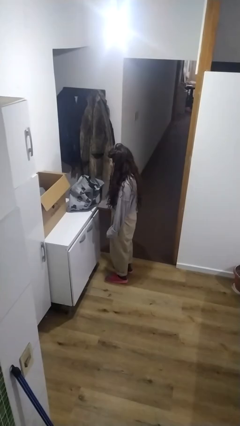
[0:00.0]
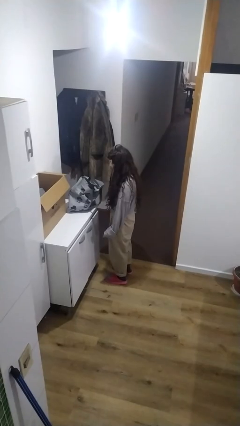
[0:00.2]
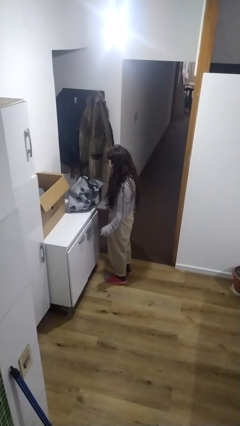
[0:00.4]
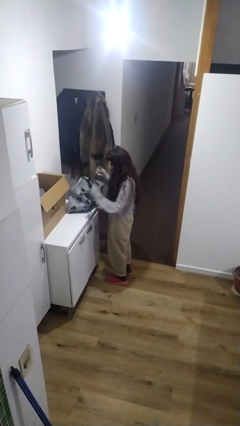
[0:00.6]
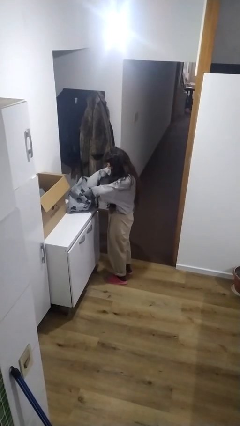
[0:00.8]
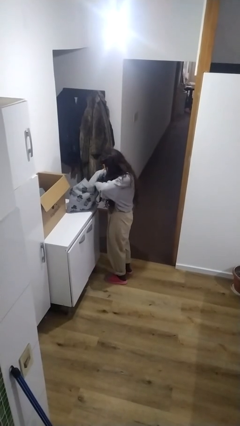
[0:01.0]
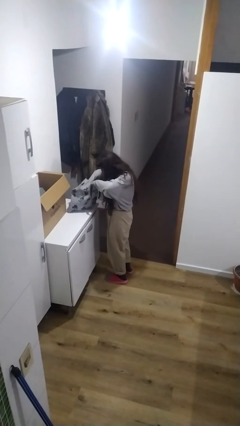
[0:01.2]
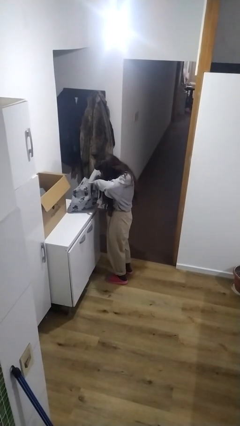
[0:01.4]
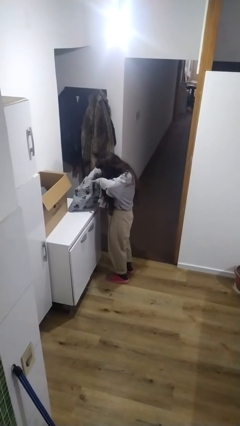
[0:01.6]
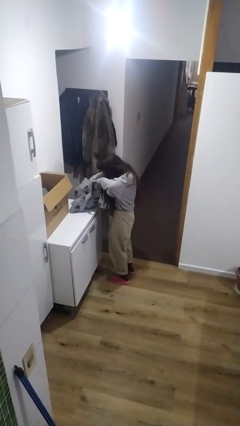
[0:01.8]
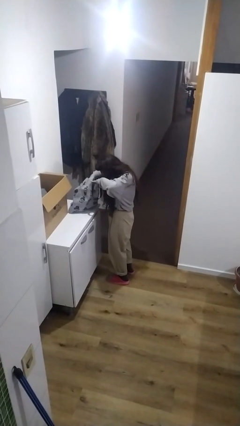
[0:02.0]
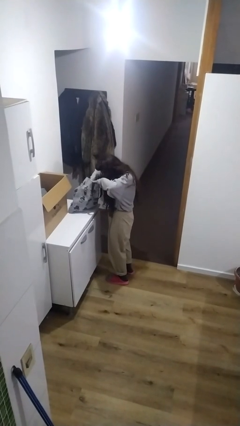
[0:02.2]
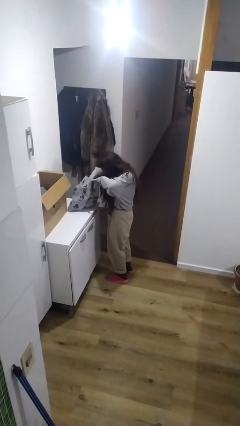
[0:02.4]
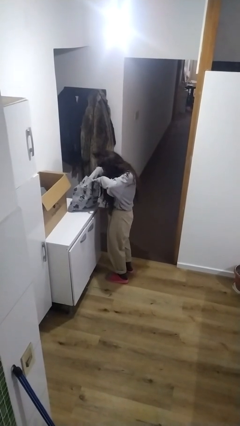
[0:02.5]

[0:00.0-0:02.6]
person searches in bag

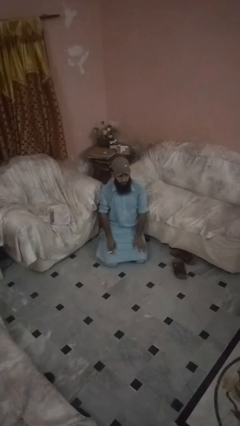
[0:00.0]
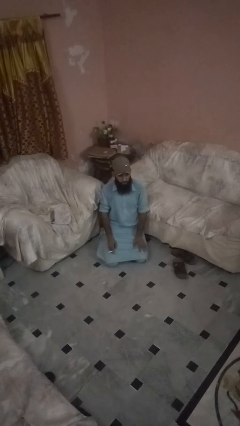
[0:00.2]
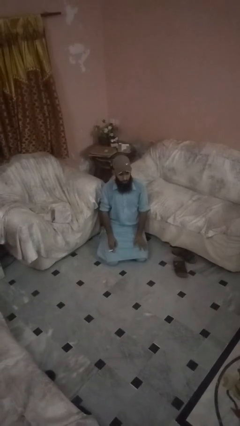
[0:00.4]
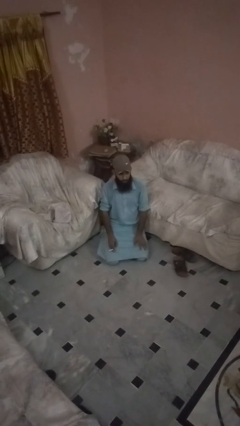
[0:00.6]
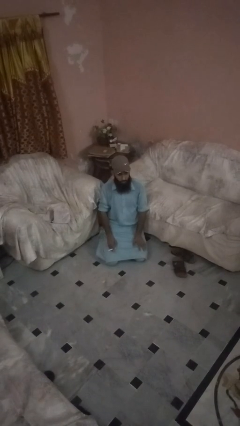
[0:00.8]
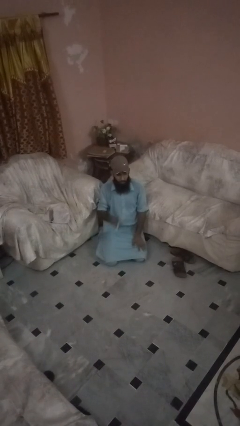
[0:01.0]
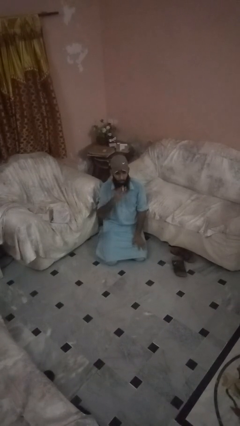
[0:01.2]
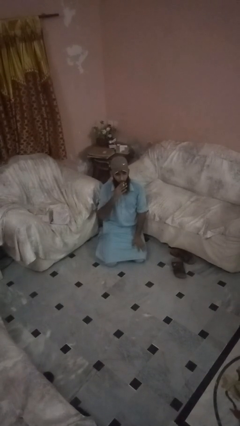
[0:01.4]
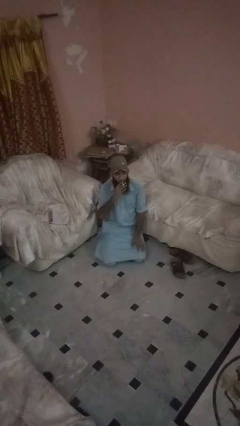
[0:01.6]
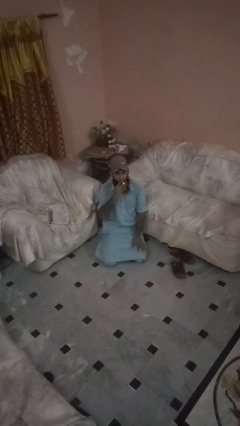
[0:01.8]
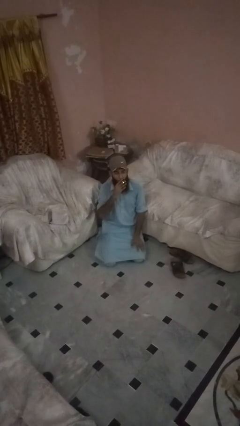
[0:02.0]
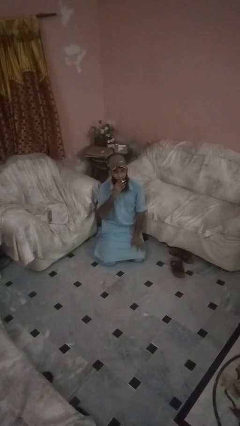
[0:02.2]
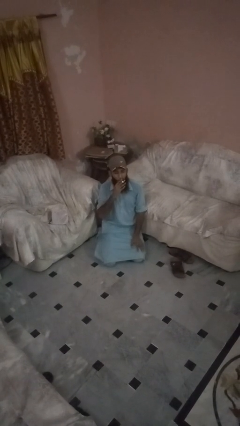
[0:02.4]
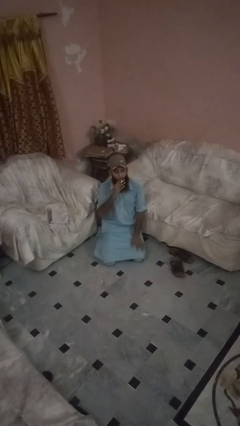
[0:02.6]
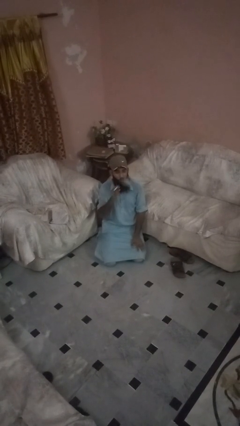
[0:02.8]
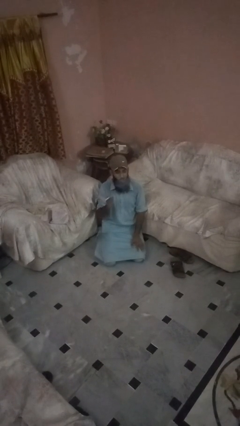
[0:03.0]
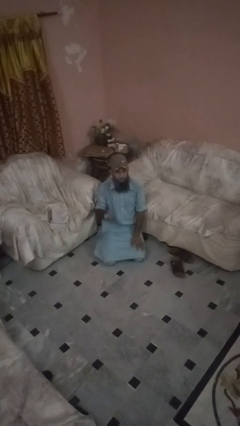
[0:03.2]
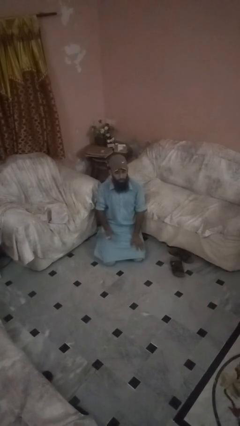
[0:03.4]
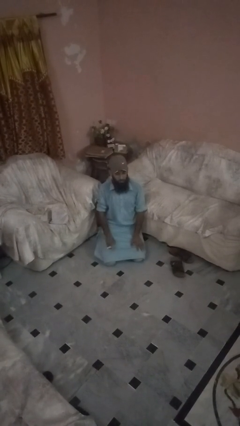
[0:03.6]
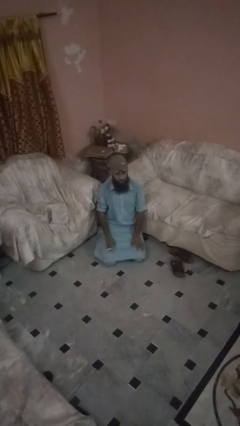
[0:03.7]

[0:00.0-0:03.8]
person vapes

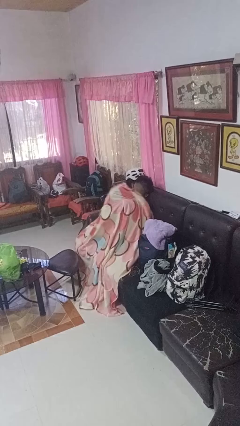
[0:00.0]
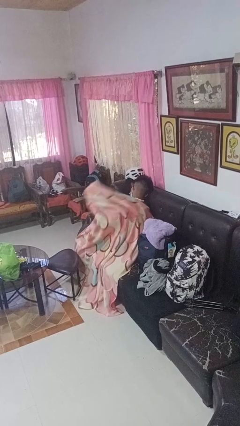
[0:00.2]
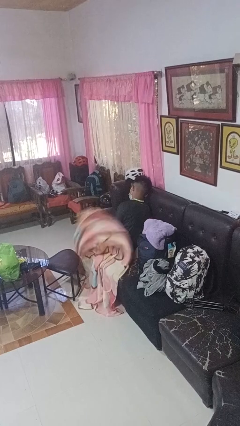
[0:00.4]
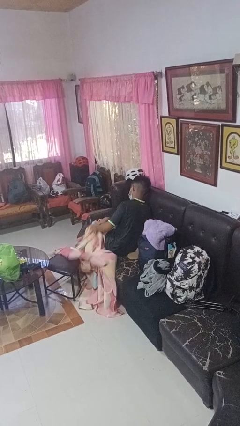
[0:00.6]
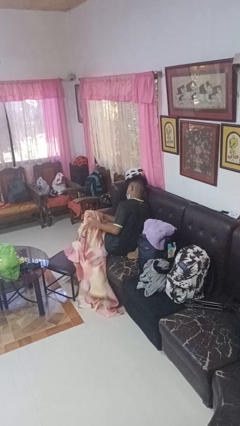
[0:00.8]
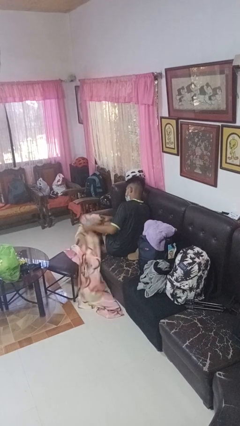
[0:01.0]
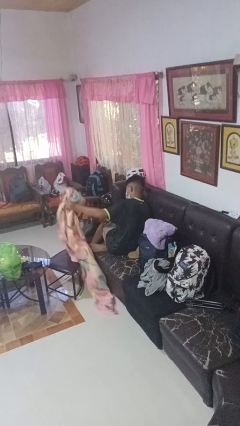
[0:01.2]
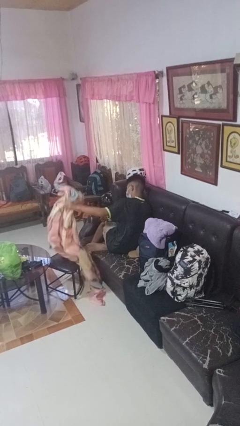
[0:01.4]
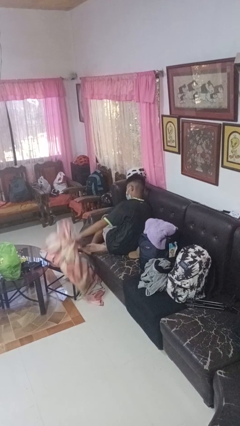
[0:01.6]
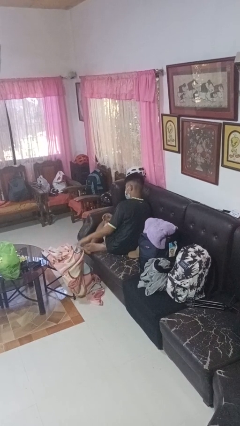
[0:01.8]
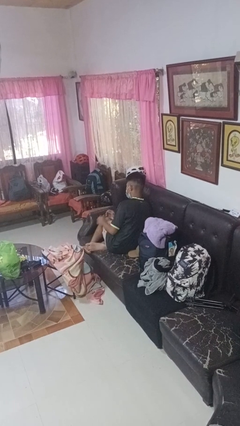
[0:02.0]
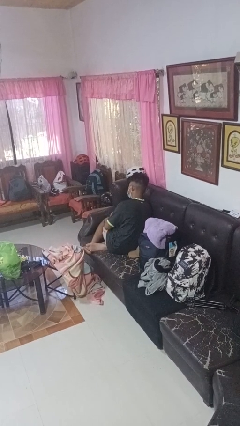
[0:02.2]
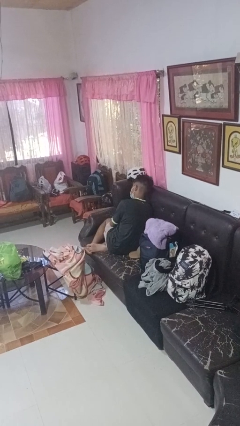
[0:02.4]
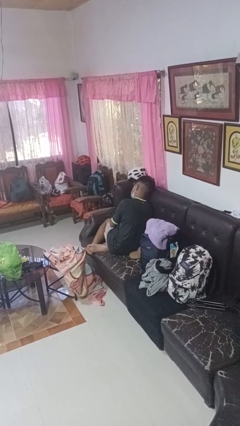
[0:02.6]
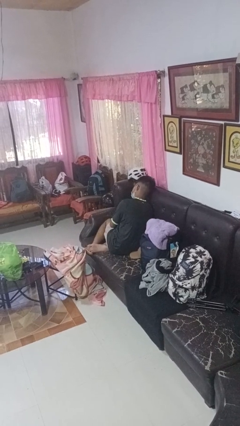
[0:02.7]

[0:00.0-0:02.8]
person uncovers with blanket

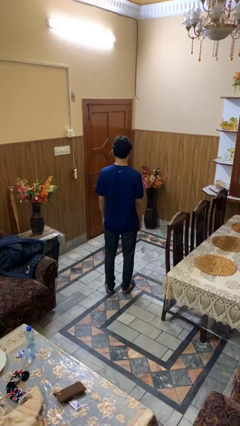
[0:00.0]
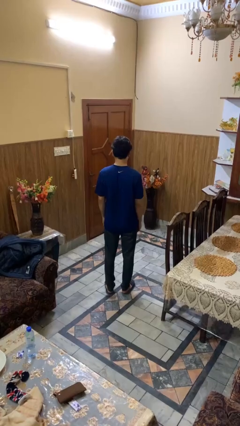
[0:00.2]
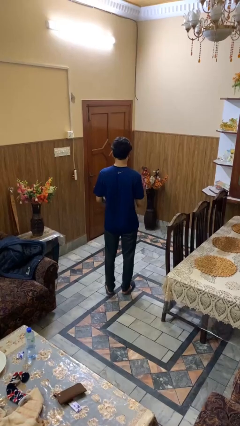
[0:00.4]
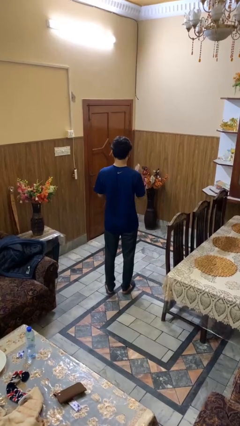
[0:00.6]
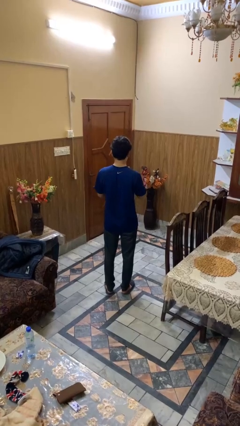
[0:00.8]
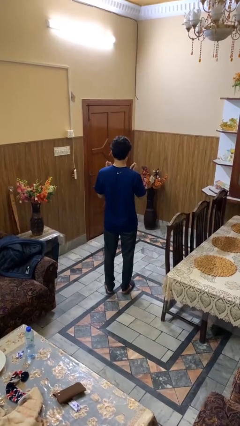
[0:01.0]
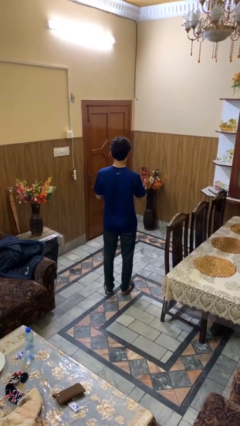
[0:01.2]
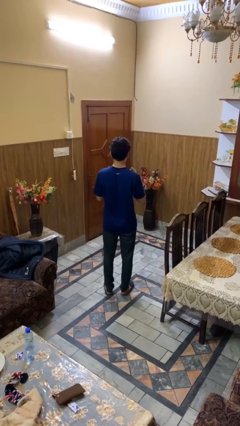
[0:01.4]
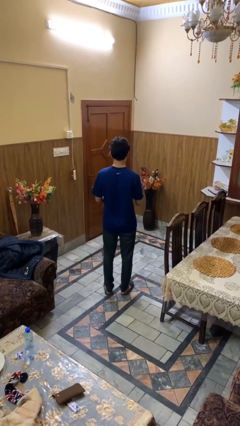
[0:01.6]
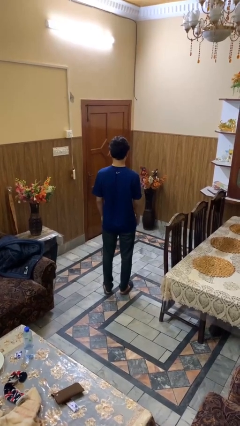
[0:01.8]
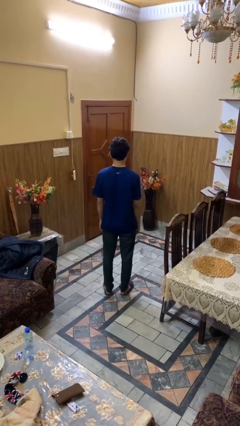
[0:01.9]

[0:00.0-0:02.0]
person drums on chest

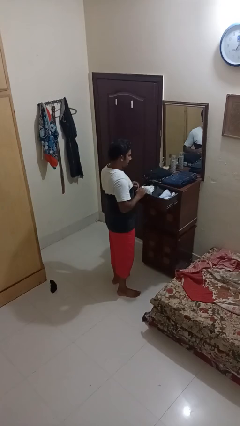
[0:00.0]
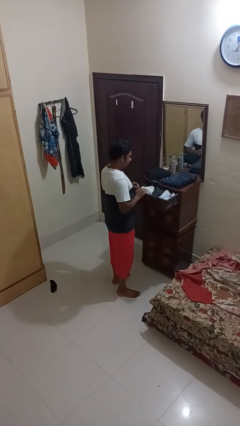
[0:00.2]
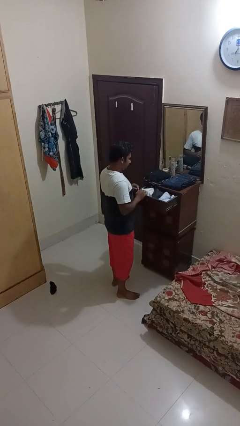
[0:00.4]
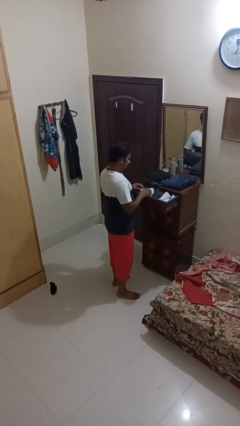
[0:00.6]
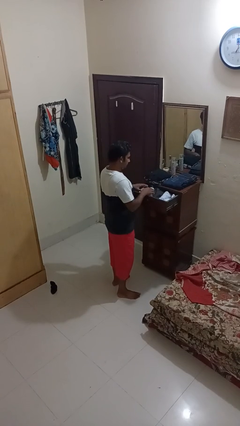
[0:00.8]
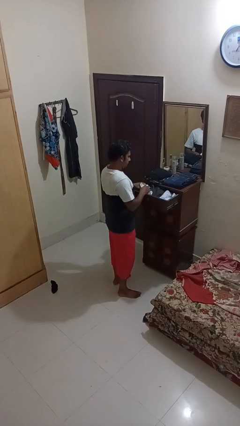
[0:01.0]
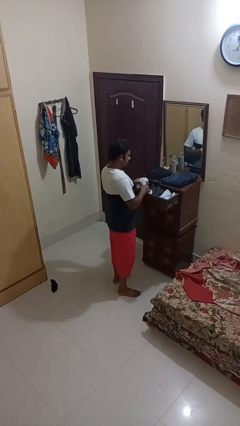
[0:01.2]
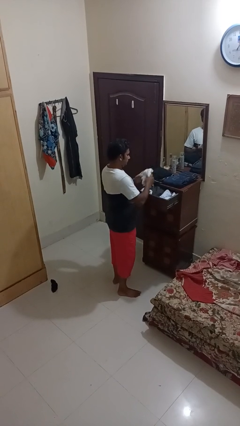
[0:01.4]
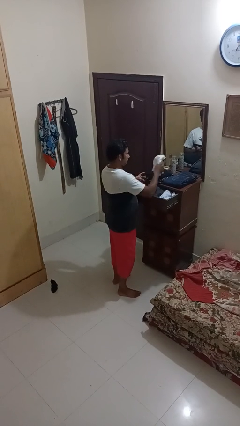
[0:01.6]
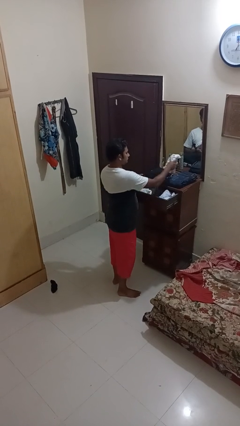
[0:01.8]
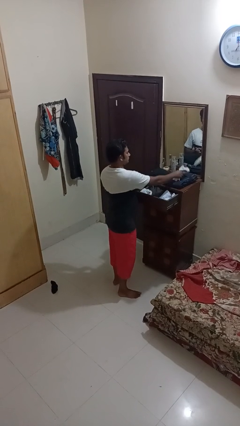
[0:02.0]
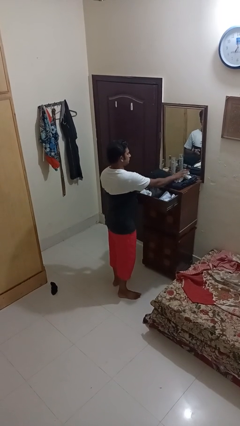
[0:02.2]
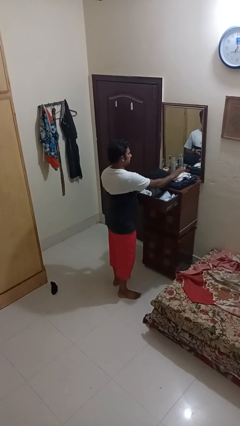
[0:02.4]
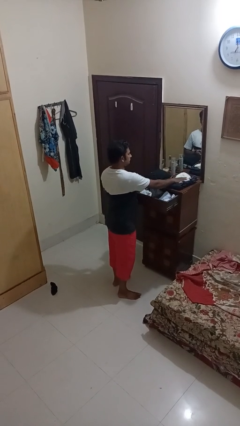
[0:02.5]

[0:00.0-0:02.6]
person takes clothes from dresser

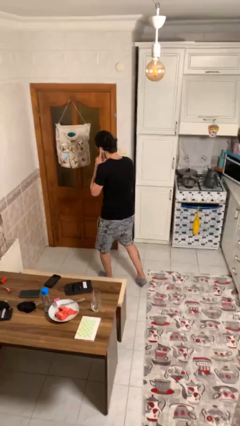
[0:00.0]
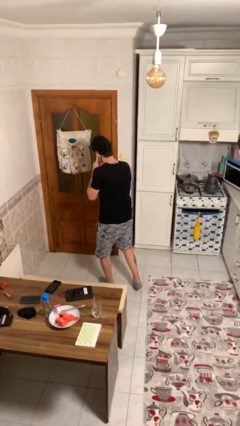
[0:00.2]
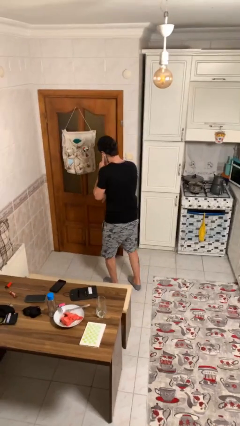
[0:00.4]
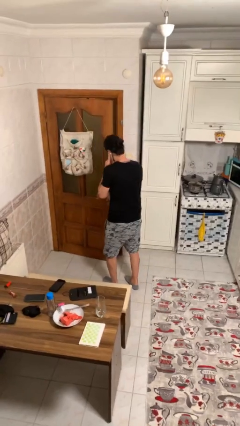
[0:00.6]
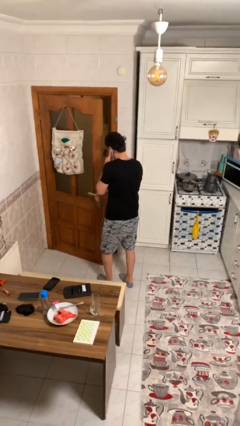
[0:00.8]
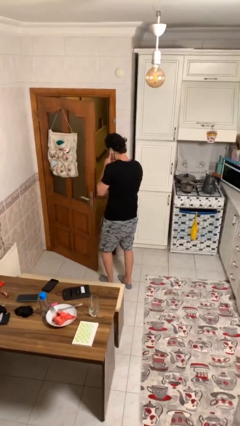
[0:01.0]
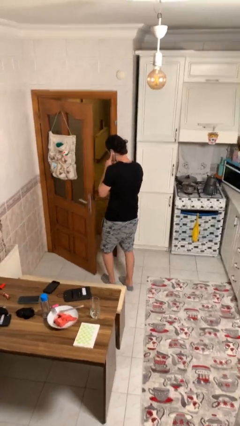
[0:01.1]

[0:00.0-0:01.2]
person opens facility door

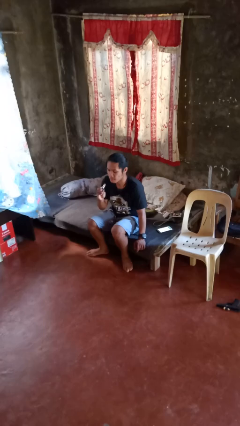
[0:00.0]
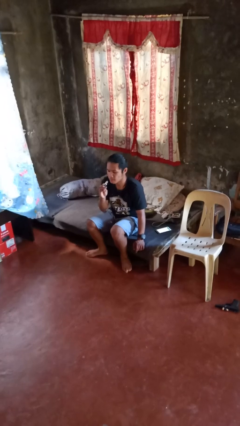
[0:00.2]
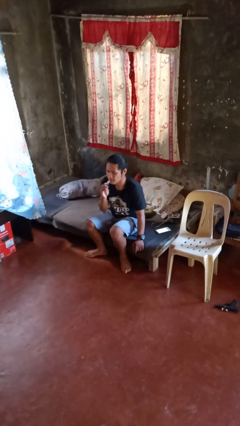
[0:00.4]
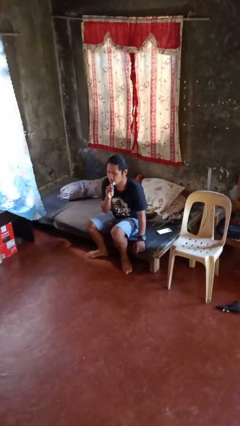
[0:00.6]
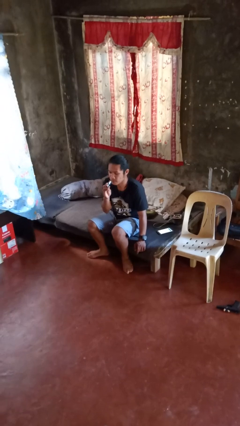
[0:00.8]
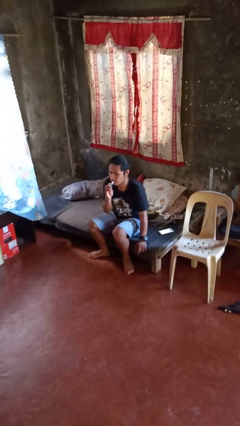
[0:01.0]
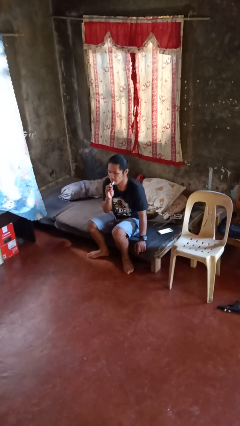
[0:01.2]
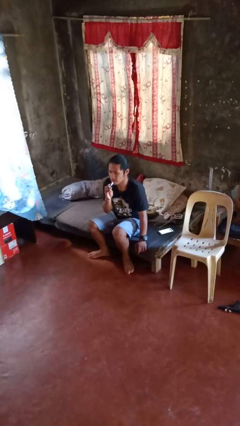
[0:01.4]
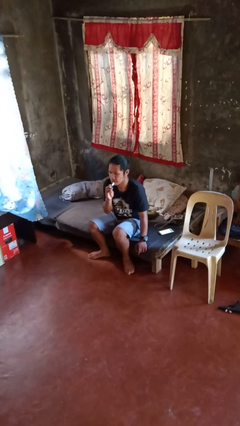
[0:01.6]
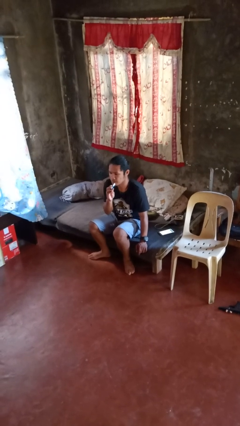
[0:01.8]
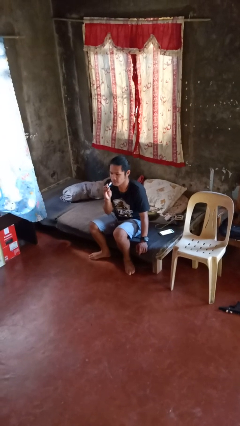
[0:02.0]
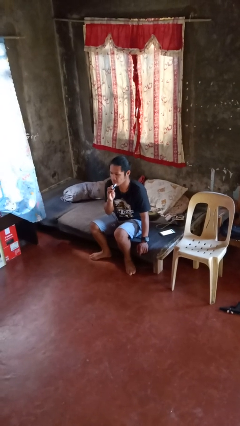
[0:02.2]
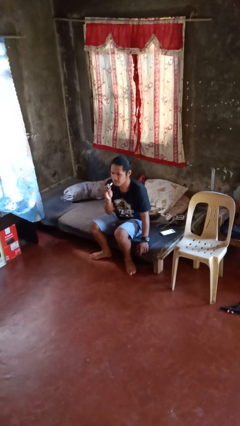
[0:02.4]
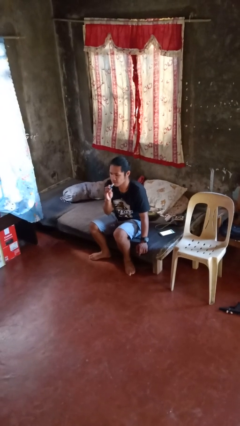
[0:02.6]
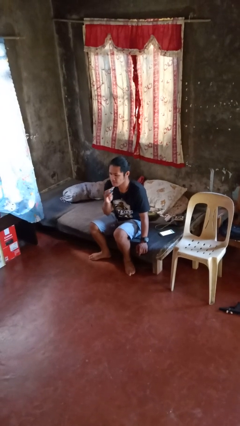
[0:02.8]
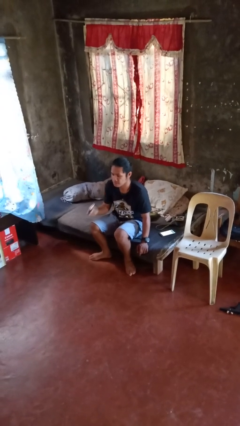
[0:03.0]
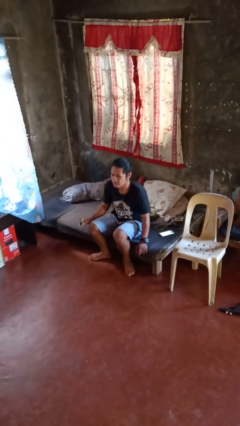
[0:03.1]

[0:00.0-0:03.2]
person applies lip makeup
